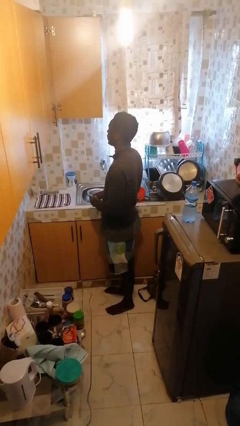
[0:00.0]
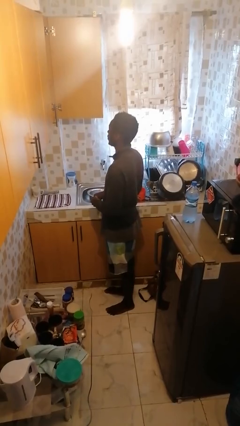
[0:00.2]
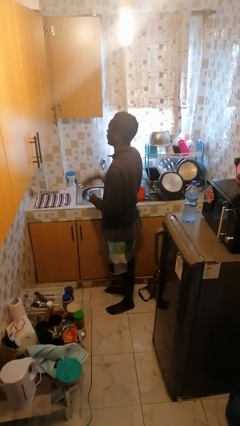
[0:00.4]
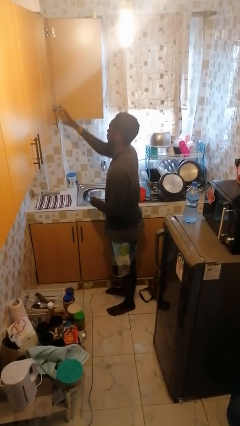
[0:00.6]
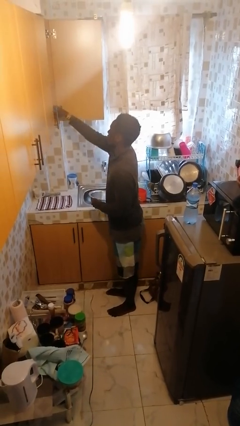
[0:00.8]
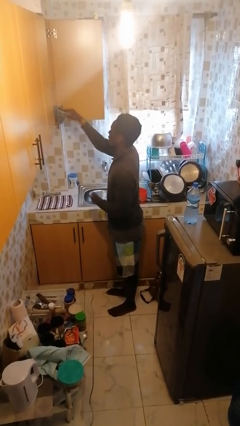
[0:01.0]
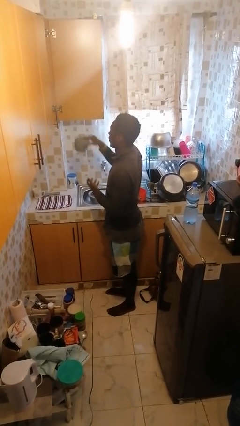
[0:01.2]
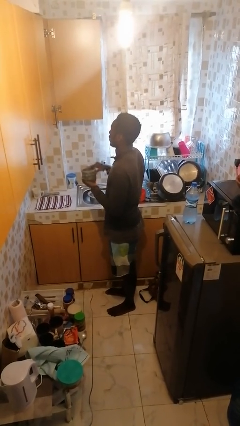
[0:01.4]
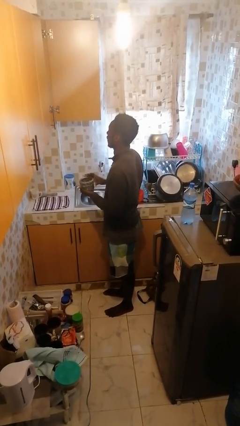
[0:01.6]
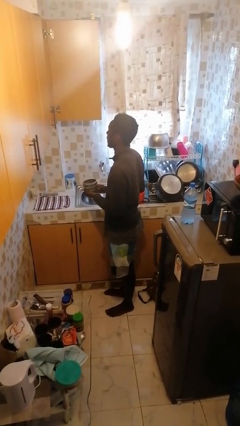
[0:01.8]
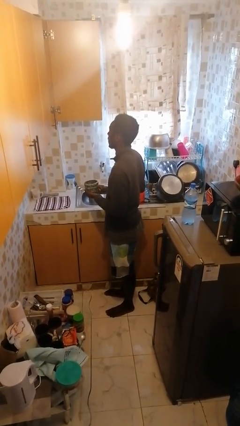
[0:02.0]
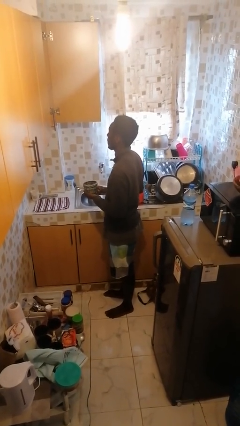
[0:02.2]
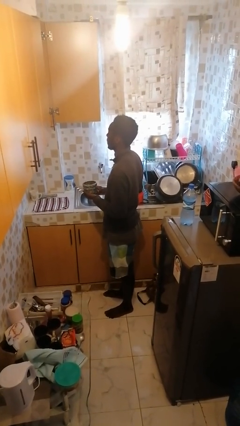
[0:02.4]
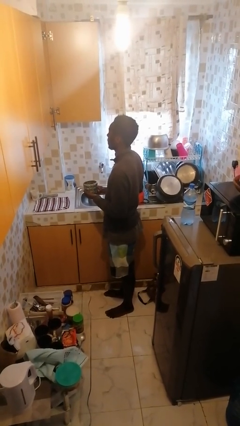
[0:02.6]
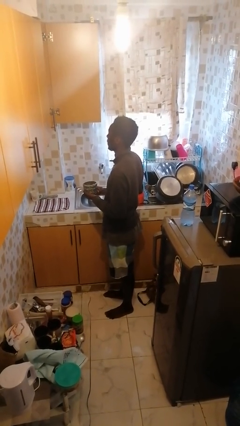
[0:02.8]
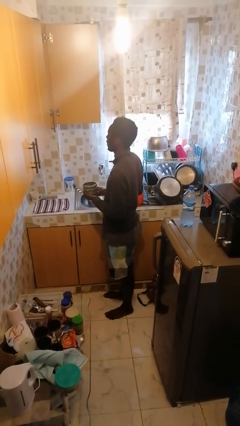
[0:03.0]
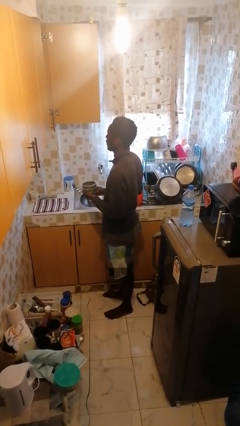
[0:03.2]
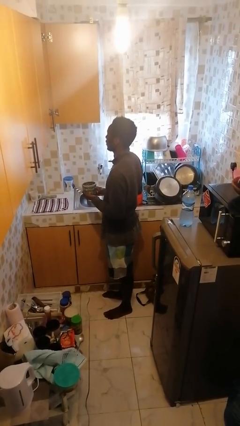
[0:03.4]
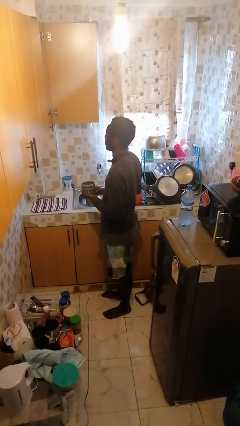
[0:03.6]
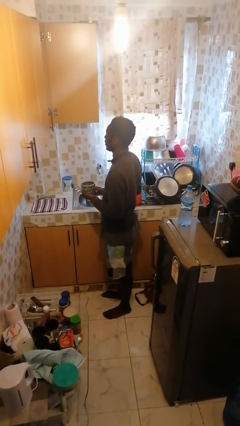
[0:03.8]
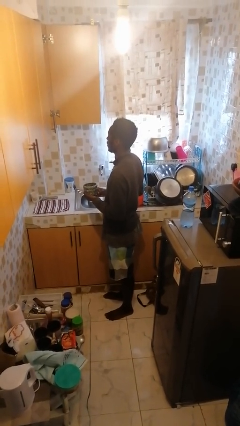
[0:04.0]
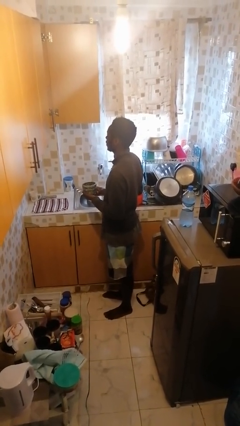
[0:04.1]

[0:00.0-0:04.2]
person picks up object from cabinet

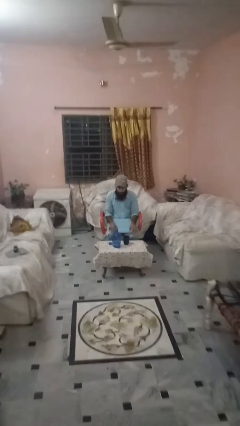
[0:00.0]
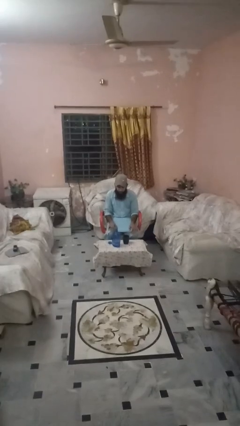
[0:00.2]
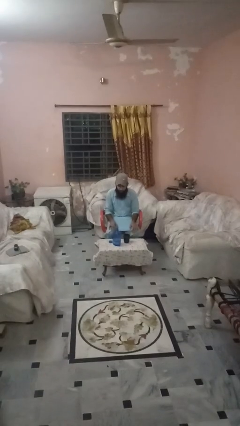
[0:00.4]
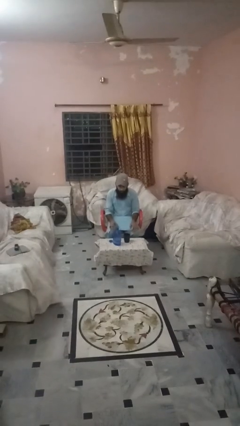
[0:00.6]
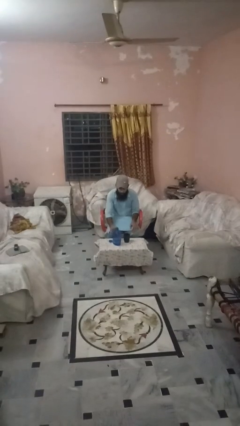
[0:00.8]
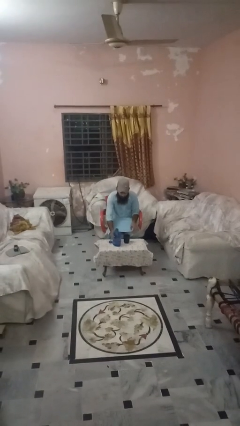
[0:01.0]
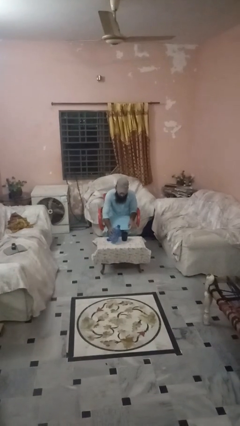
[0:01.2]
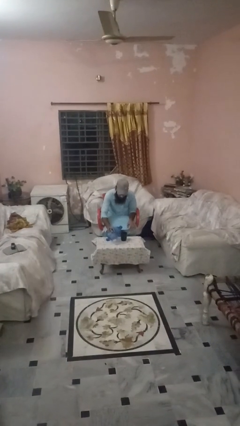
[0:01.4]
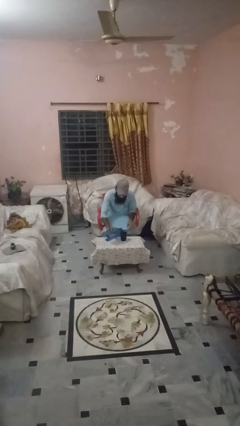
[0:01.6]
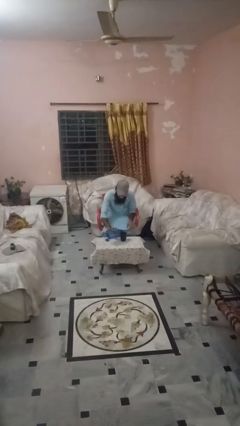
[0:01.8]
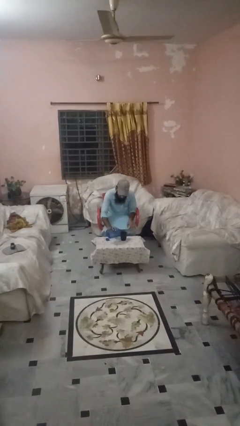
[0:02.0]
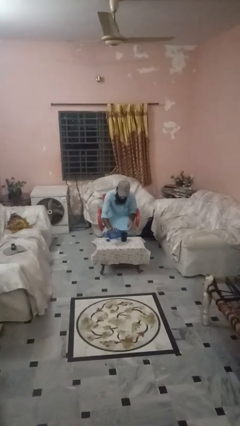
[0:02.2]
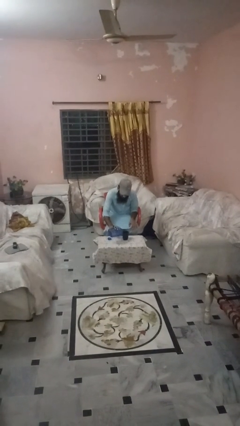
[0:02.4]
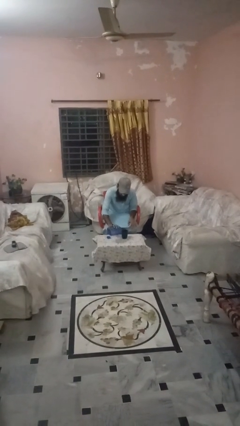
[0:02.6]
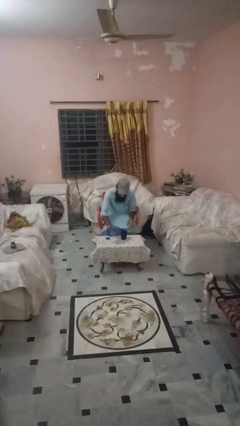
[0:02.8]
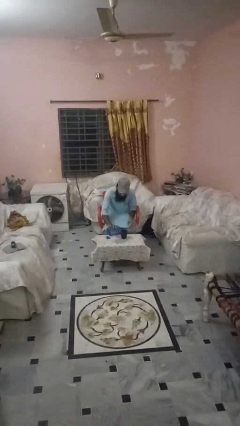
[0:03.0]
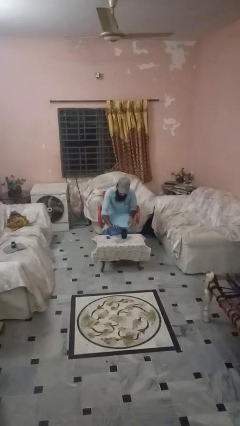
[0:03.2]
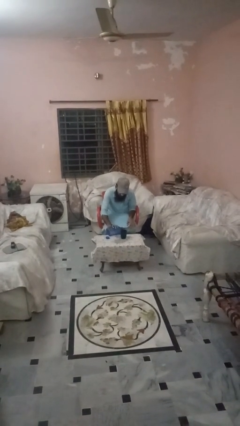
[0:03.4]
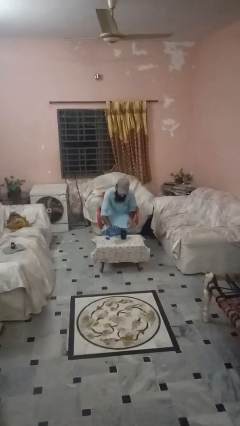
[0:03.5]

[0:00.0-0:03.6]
person pours liquid into cup

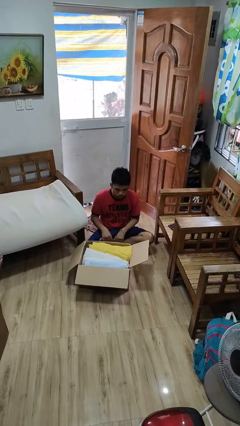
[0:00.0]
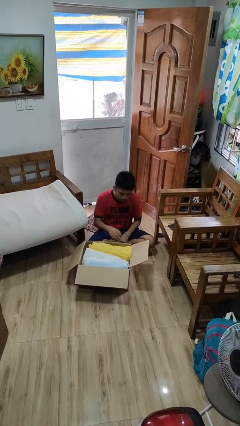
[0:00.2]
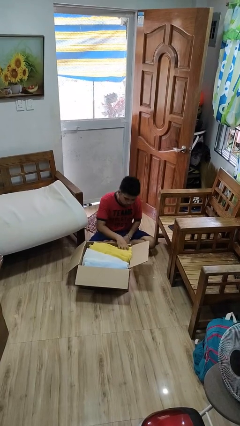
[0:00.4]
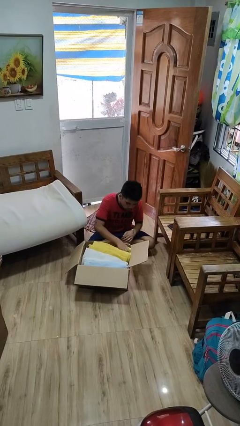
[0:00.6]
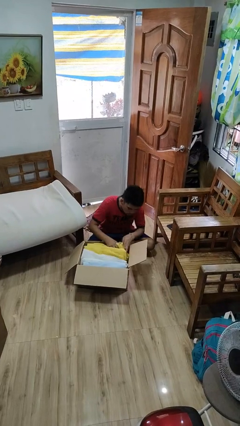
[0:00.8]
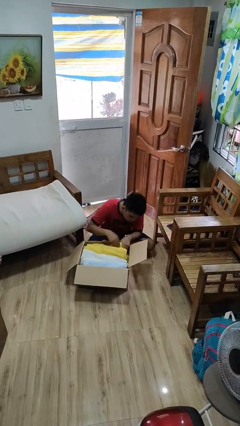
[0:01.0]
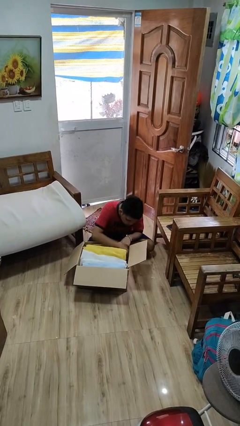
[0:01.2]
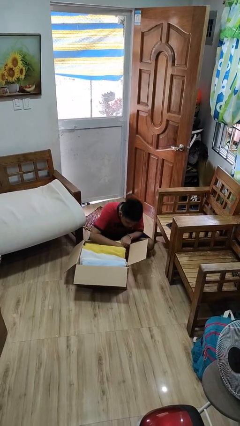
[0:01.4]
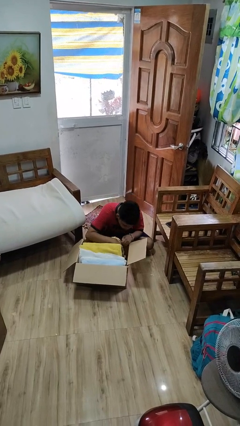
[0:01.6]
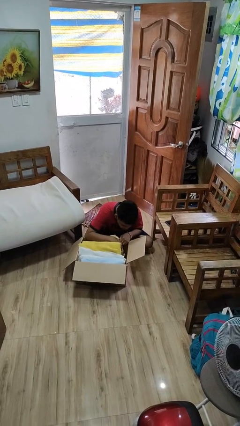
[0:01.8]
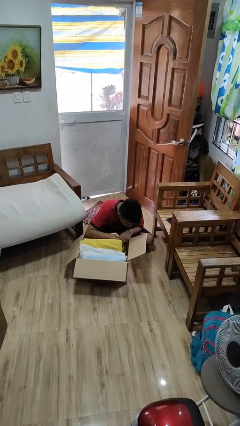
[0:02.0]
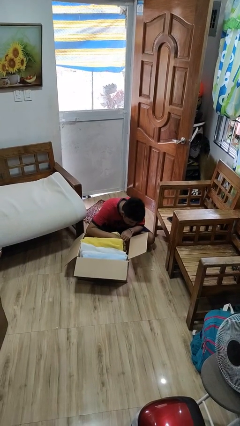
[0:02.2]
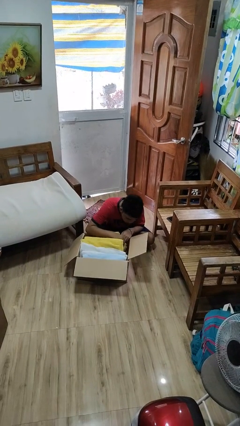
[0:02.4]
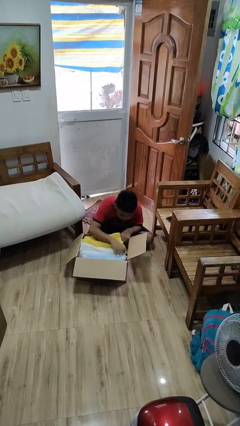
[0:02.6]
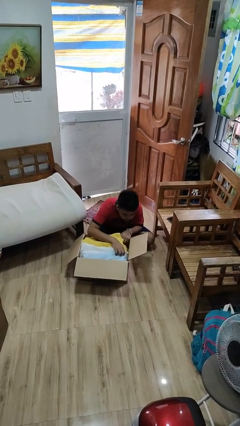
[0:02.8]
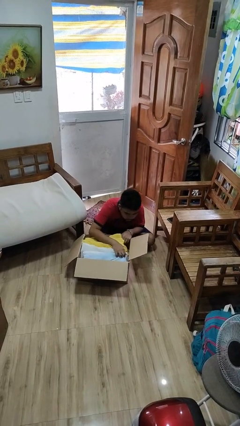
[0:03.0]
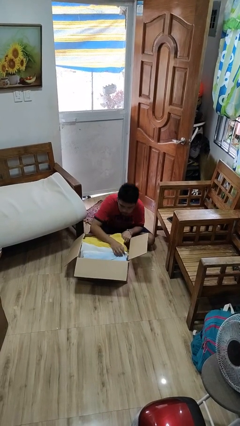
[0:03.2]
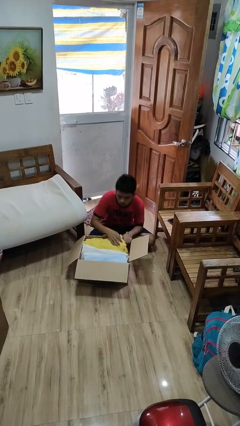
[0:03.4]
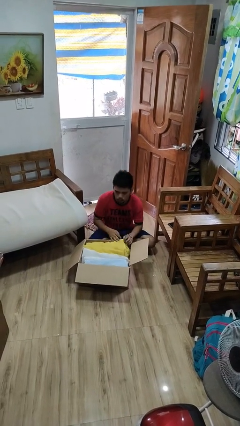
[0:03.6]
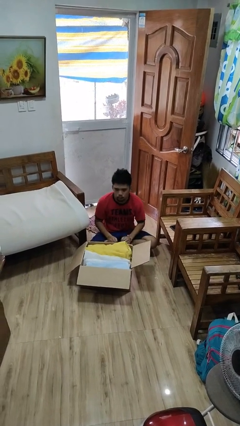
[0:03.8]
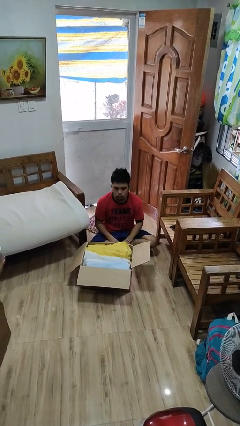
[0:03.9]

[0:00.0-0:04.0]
person searches in box

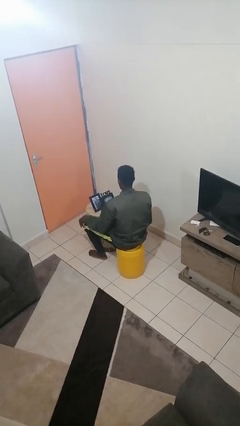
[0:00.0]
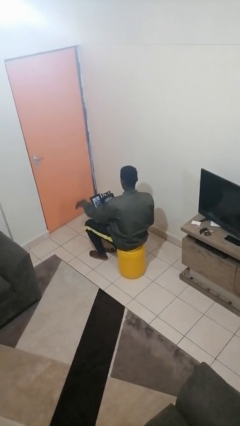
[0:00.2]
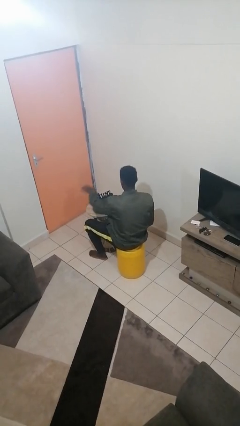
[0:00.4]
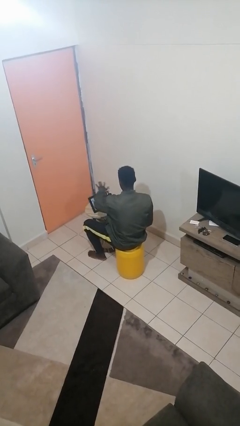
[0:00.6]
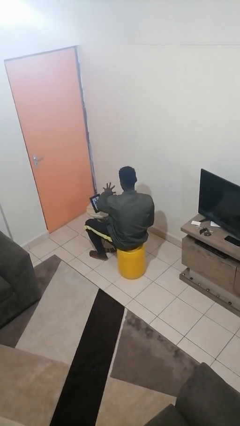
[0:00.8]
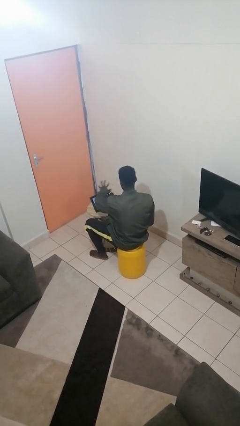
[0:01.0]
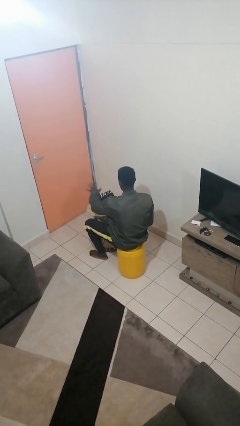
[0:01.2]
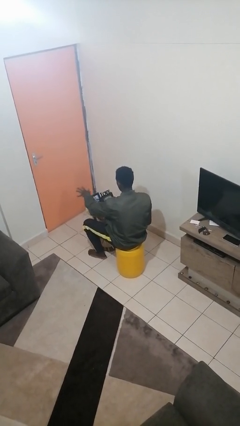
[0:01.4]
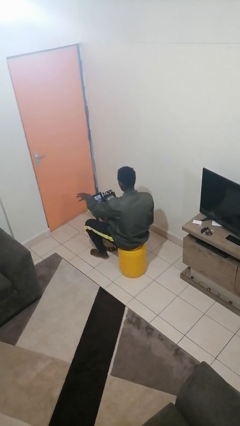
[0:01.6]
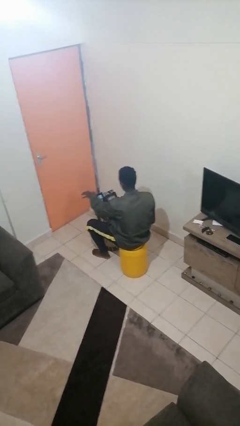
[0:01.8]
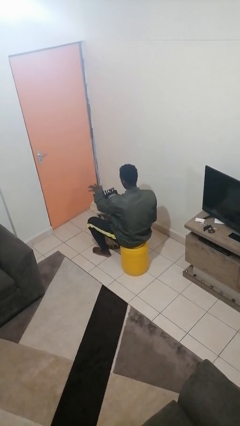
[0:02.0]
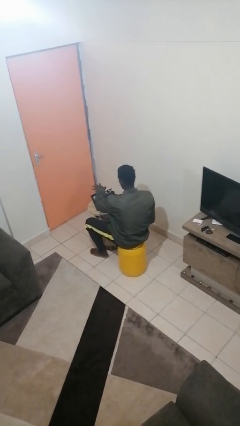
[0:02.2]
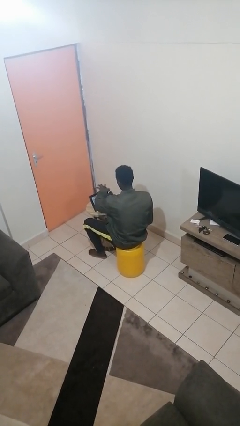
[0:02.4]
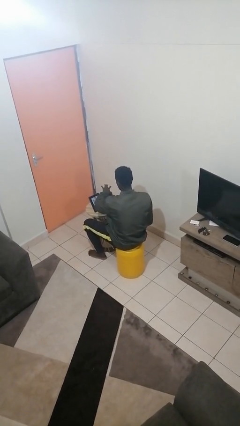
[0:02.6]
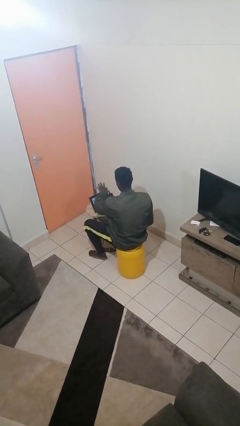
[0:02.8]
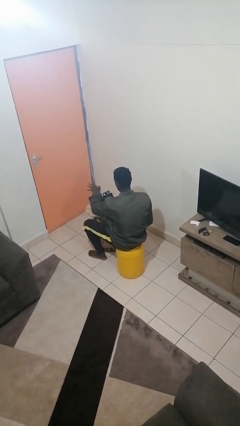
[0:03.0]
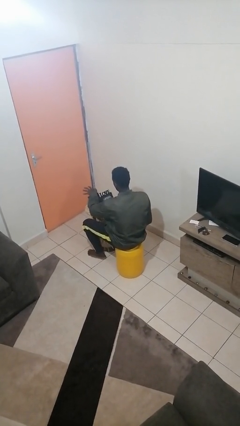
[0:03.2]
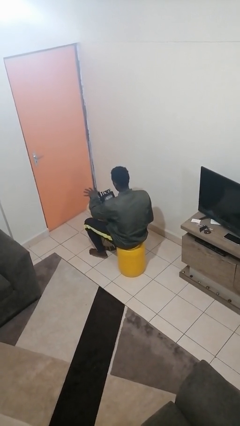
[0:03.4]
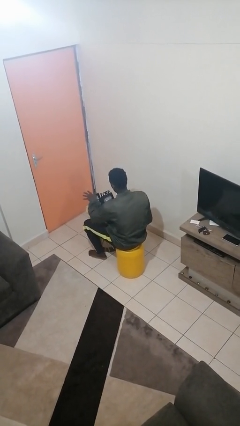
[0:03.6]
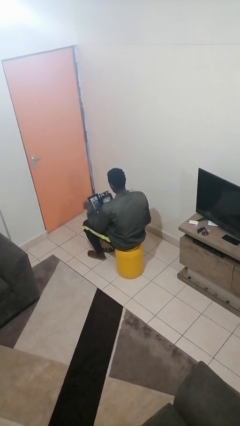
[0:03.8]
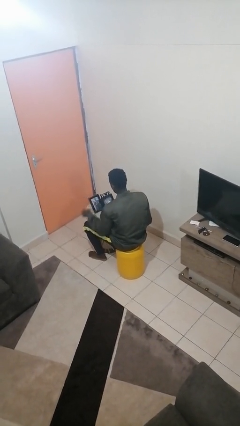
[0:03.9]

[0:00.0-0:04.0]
person waves hand over object

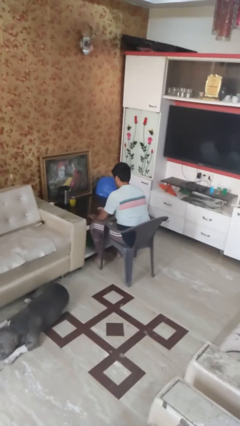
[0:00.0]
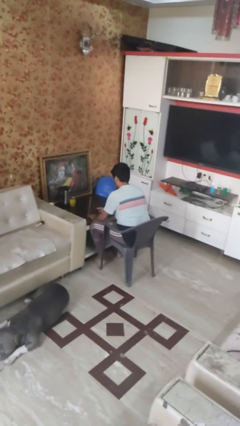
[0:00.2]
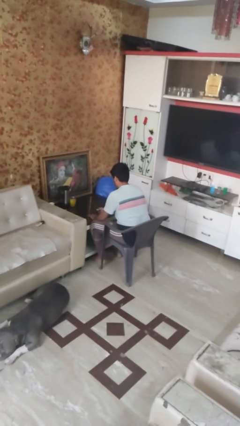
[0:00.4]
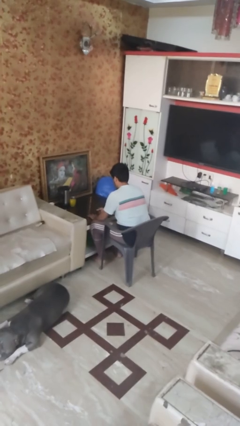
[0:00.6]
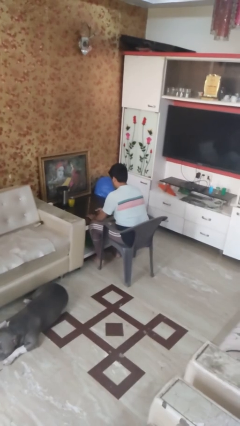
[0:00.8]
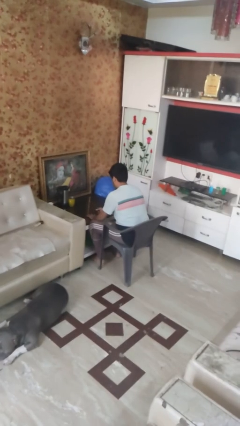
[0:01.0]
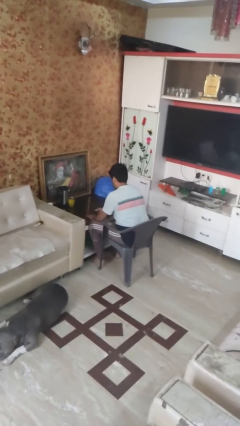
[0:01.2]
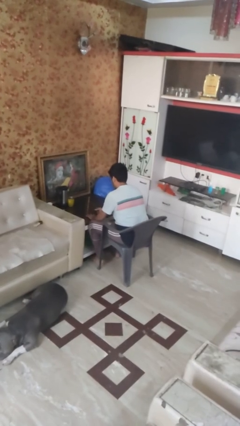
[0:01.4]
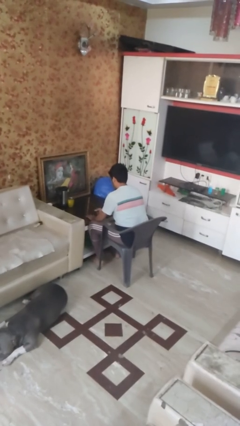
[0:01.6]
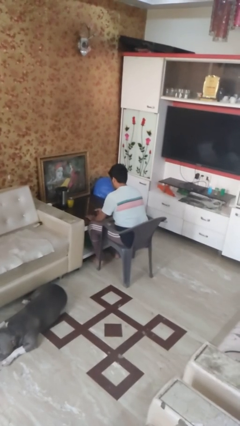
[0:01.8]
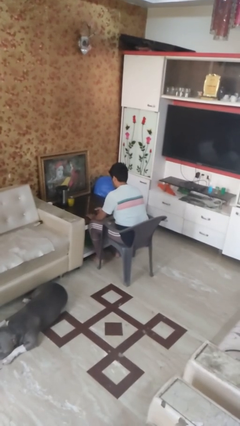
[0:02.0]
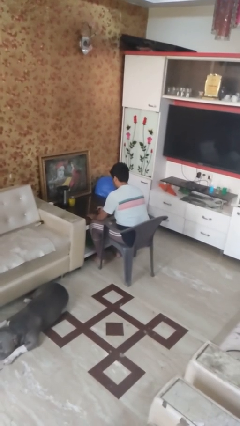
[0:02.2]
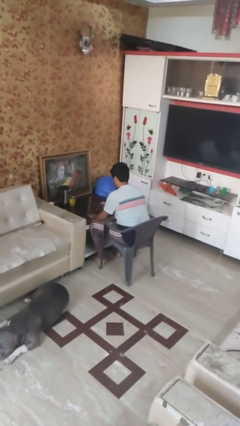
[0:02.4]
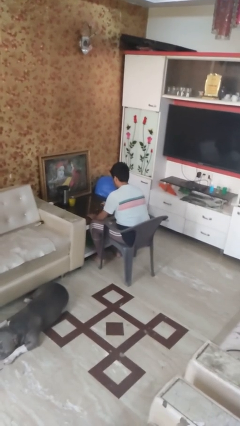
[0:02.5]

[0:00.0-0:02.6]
person paints fingernails
